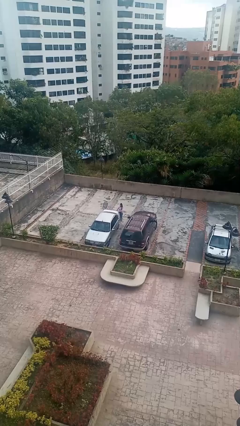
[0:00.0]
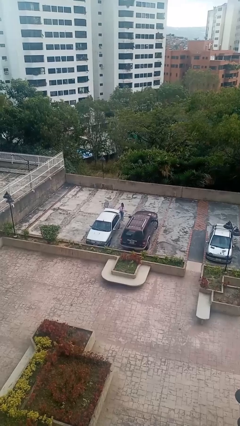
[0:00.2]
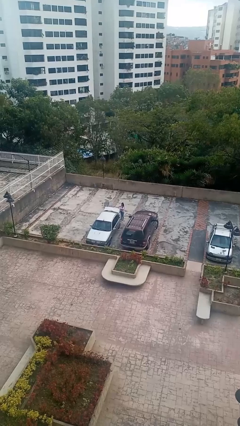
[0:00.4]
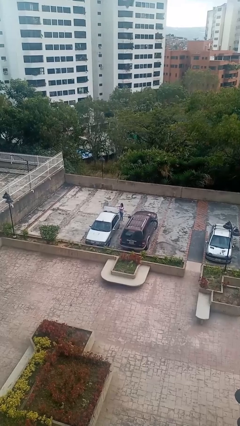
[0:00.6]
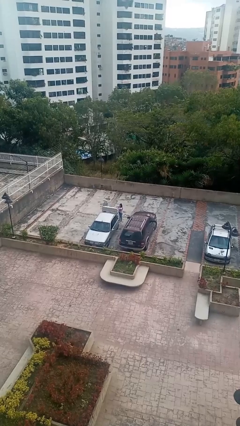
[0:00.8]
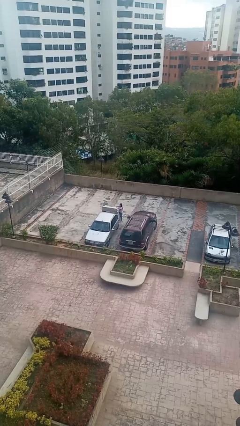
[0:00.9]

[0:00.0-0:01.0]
person opens car trunk

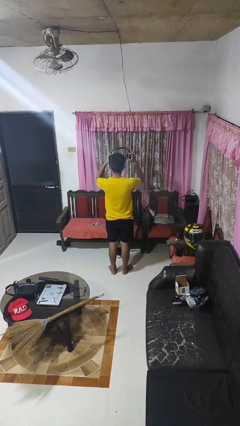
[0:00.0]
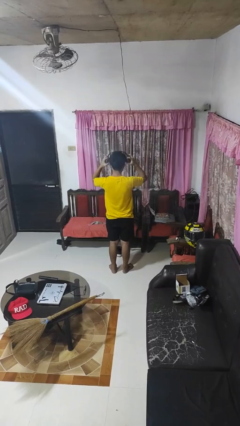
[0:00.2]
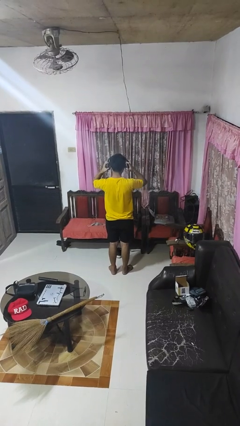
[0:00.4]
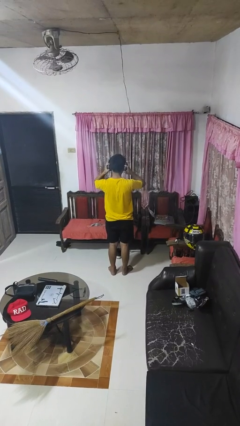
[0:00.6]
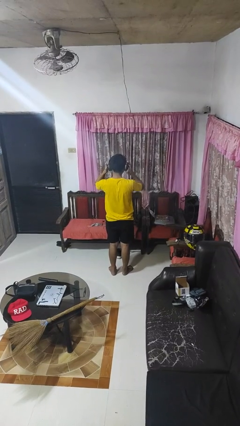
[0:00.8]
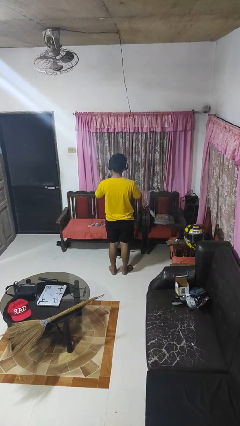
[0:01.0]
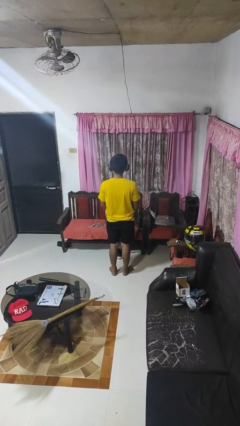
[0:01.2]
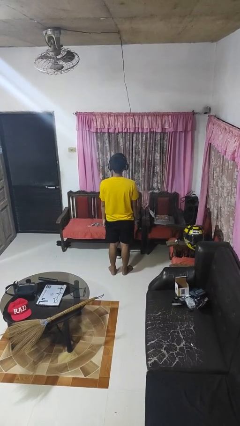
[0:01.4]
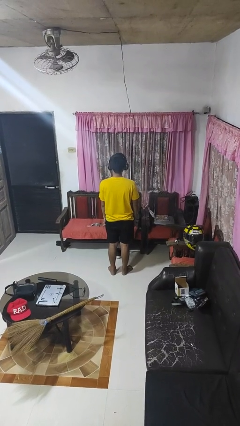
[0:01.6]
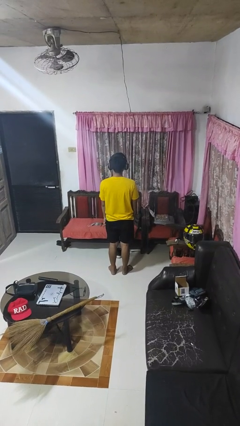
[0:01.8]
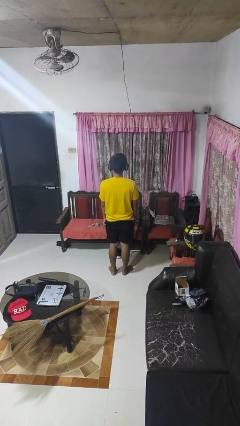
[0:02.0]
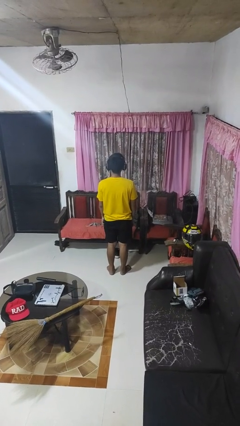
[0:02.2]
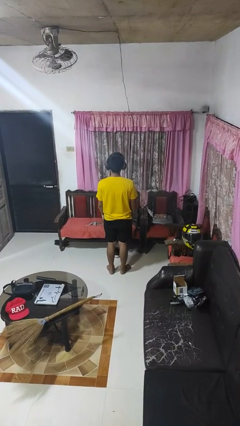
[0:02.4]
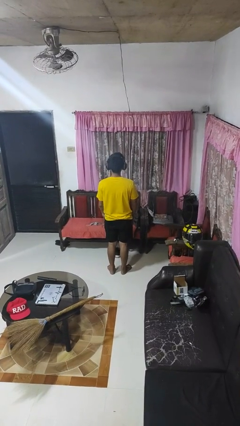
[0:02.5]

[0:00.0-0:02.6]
person puts on headphones

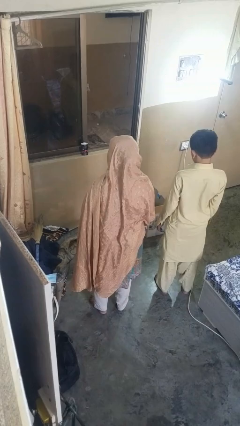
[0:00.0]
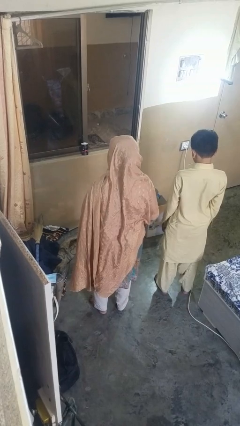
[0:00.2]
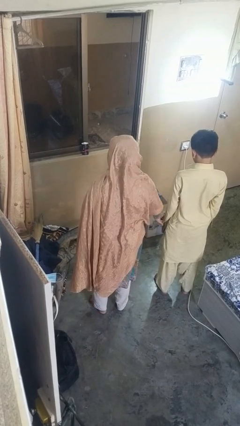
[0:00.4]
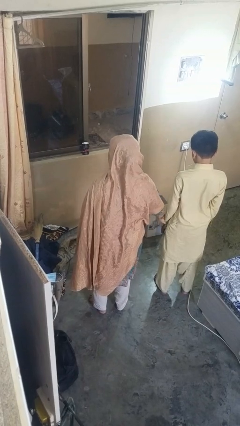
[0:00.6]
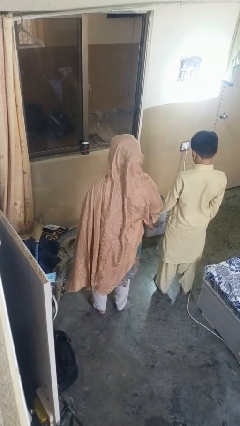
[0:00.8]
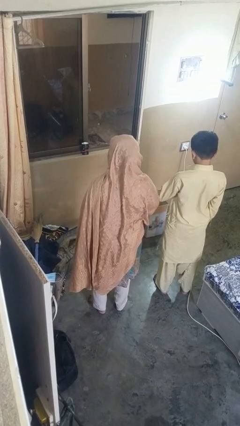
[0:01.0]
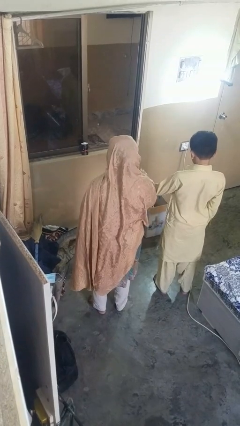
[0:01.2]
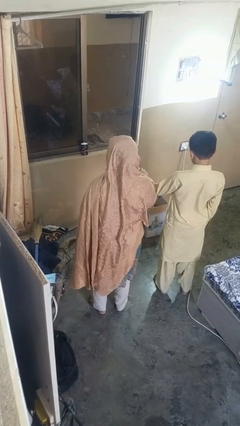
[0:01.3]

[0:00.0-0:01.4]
person grabs person by forearm

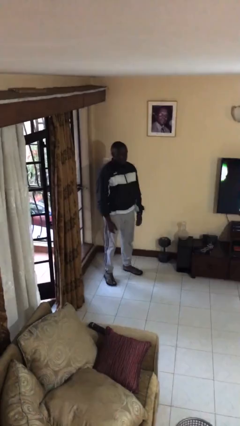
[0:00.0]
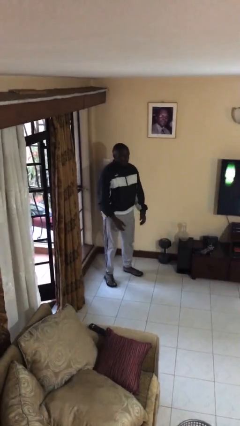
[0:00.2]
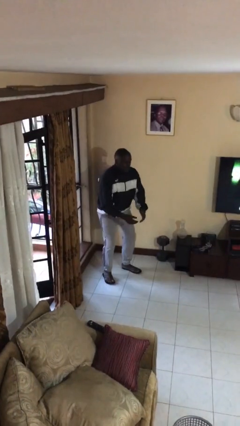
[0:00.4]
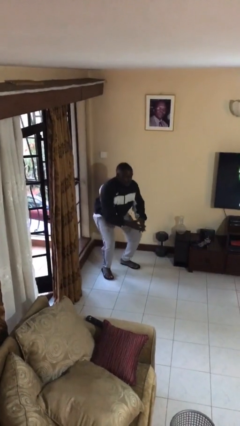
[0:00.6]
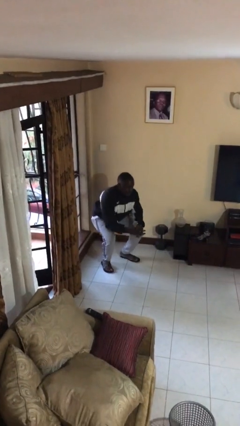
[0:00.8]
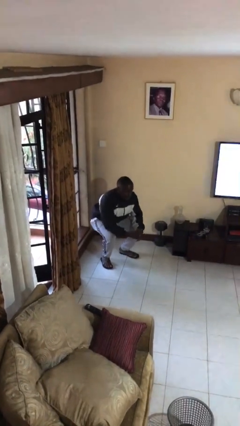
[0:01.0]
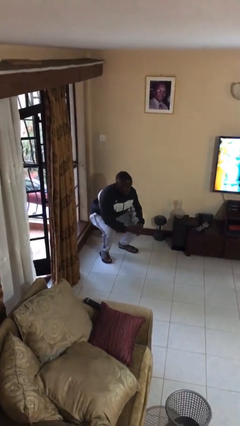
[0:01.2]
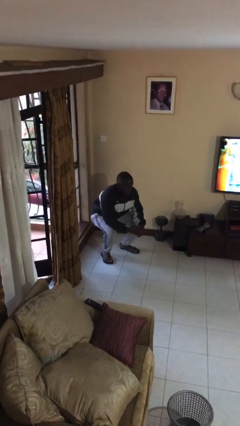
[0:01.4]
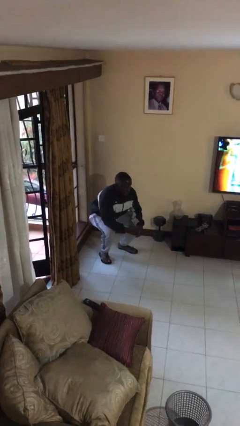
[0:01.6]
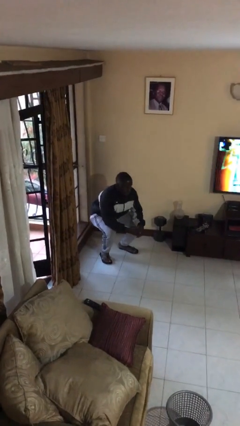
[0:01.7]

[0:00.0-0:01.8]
person squats

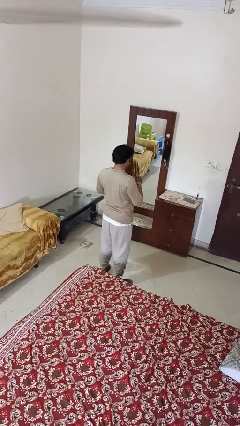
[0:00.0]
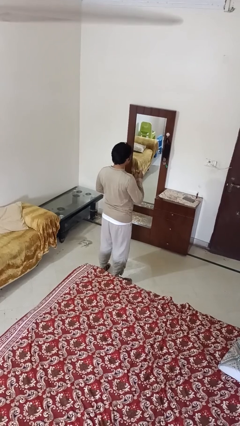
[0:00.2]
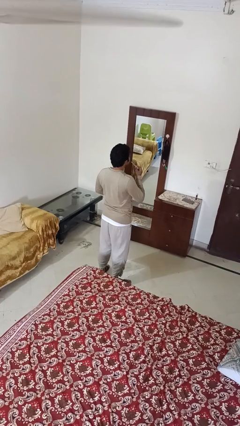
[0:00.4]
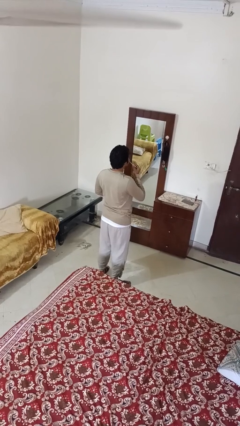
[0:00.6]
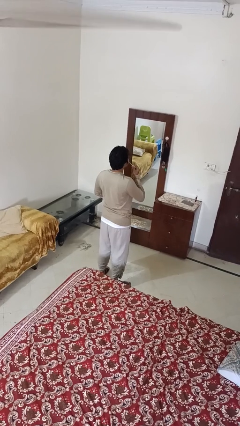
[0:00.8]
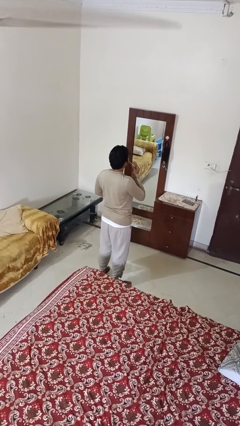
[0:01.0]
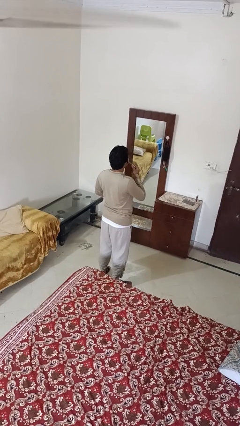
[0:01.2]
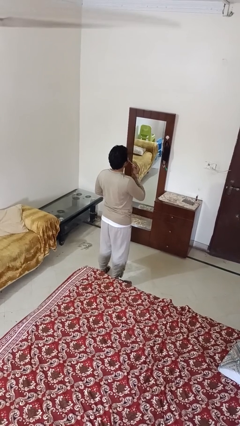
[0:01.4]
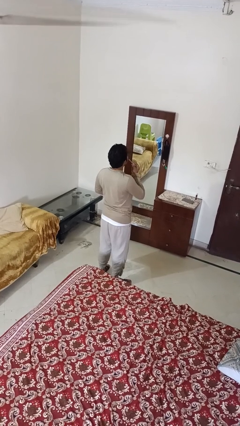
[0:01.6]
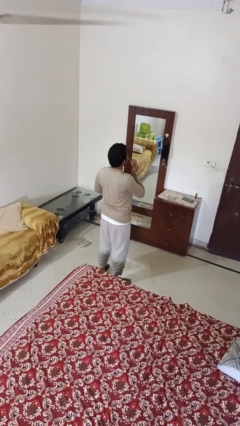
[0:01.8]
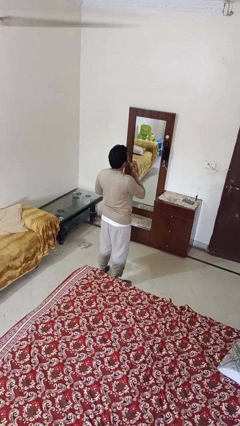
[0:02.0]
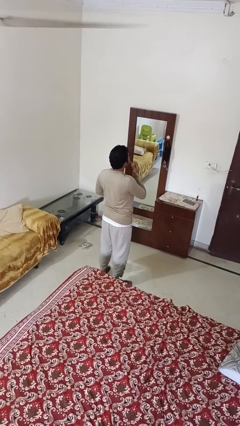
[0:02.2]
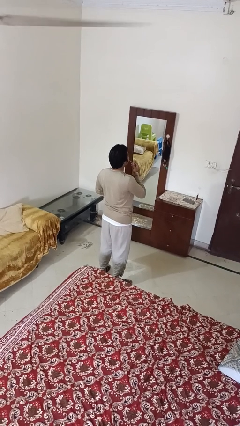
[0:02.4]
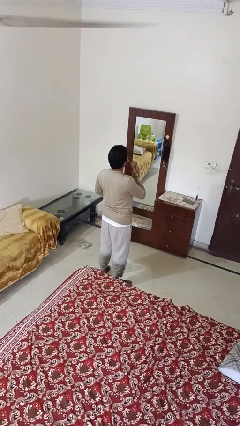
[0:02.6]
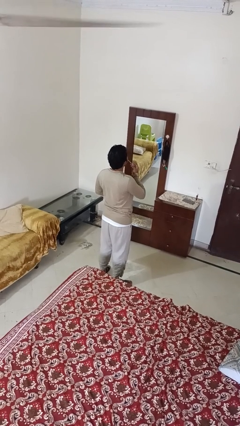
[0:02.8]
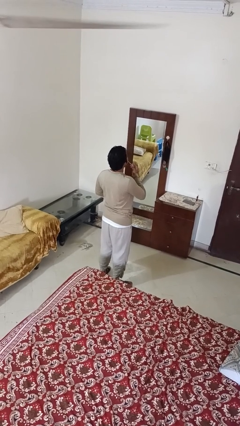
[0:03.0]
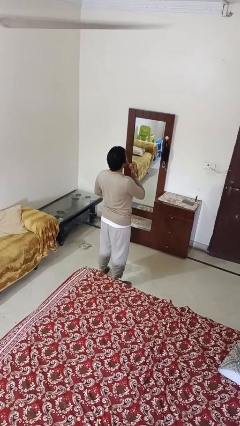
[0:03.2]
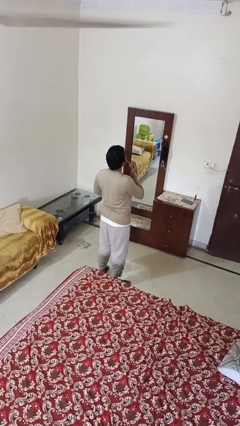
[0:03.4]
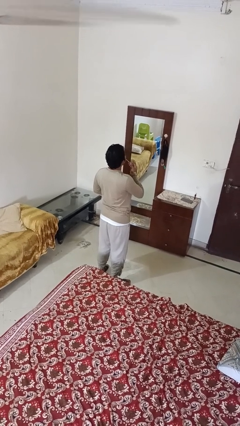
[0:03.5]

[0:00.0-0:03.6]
person applies lip makeup

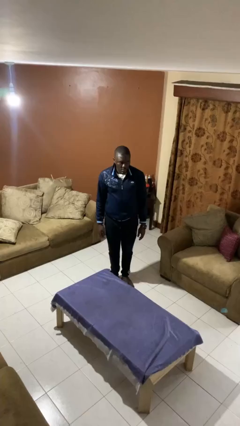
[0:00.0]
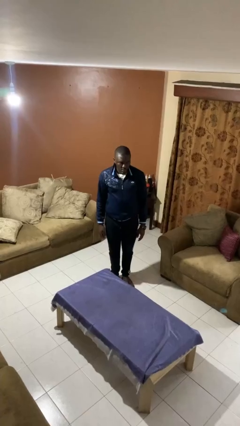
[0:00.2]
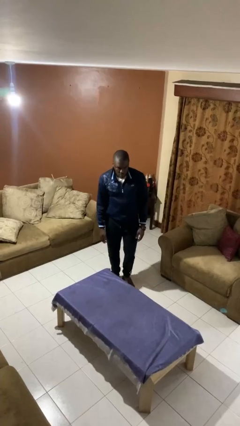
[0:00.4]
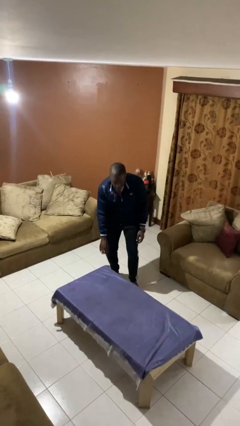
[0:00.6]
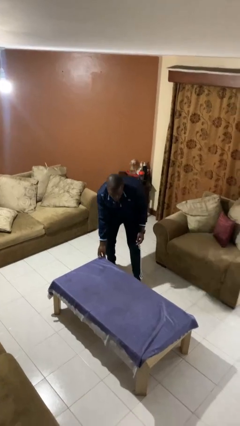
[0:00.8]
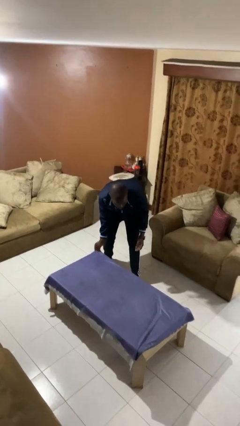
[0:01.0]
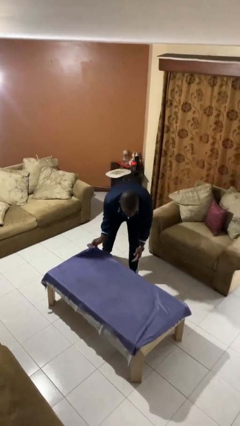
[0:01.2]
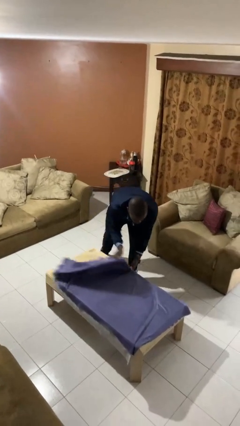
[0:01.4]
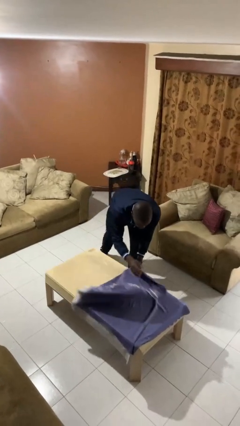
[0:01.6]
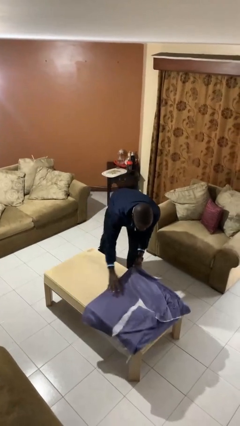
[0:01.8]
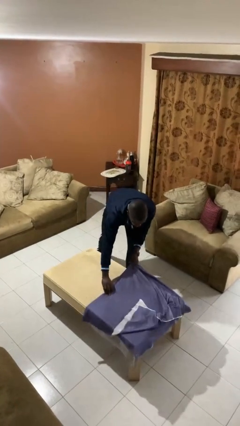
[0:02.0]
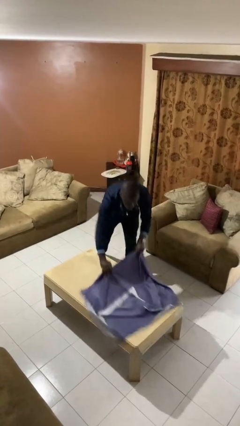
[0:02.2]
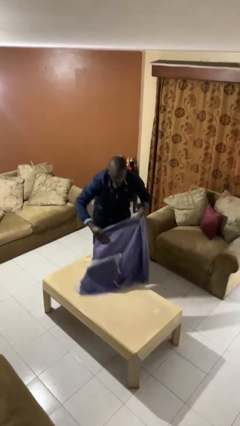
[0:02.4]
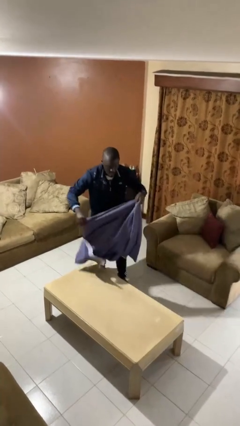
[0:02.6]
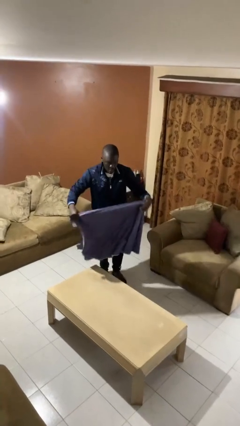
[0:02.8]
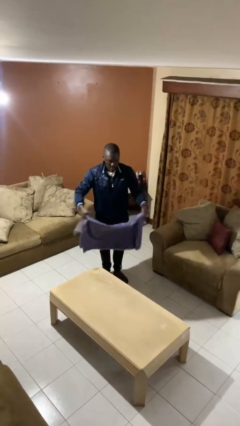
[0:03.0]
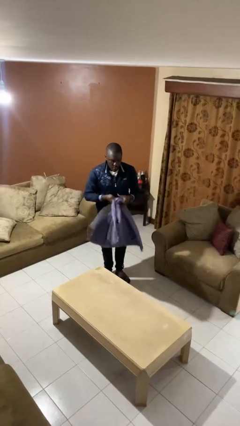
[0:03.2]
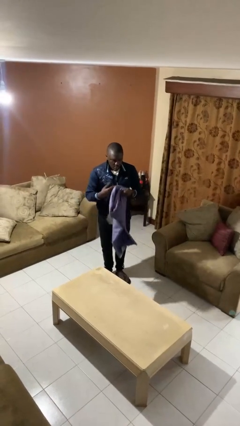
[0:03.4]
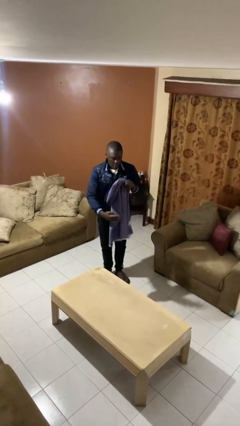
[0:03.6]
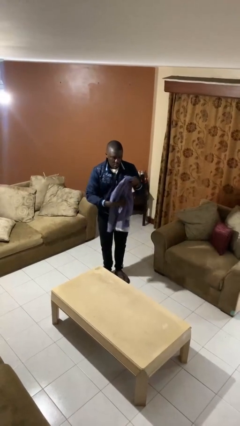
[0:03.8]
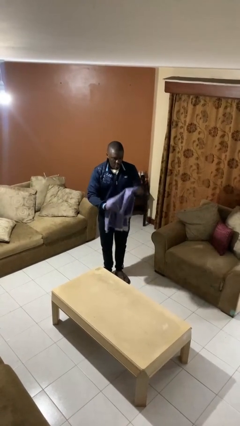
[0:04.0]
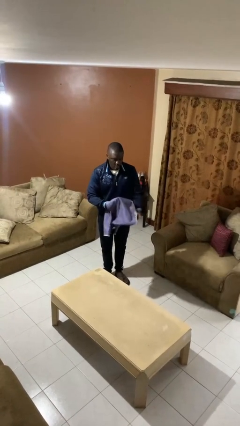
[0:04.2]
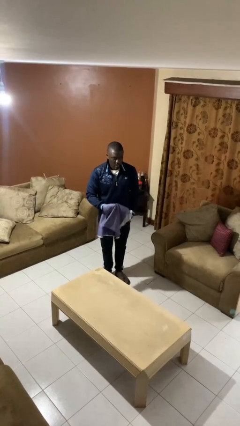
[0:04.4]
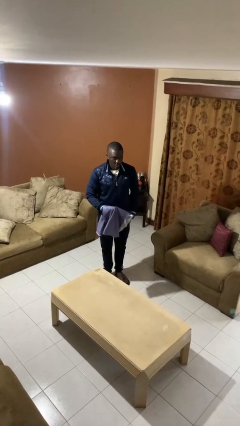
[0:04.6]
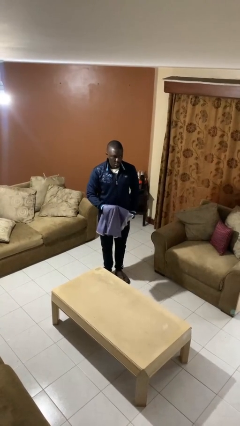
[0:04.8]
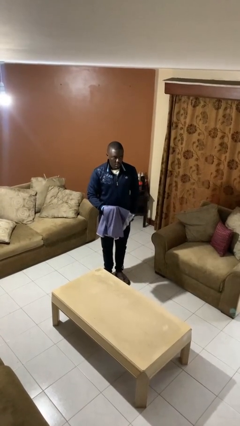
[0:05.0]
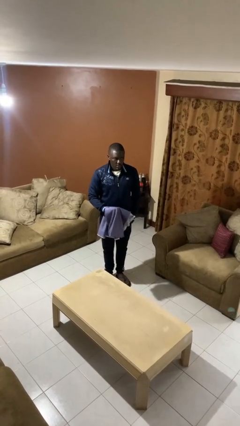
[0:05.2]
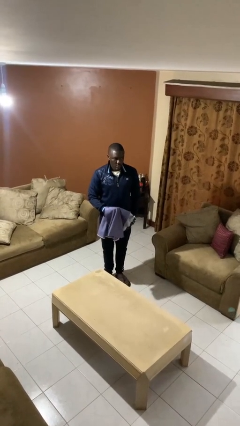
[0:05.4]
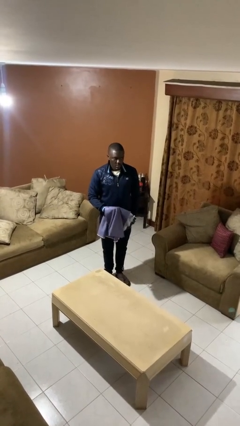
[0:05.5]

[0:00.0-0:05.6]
person folds tablecloth

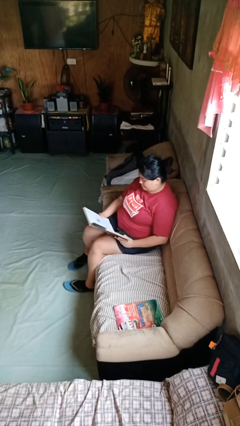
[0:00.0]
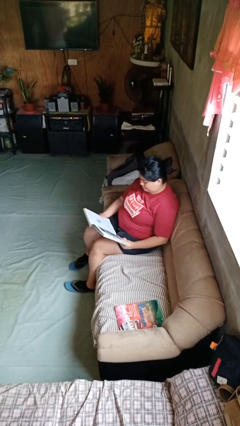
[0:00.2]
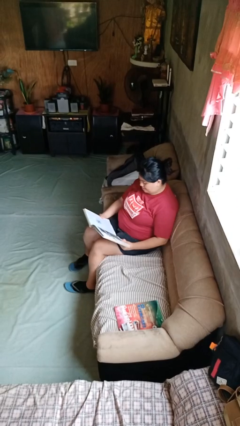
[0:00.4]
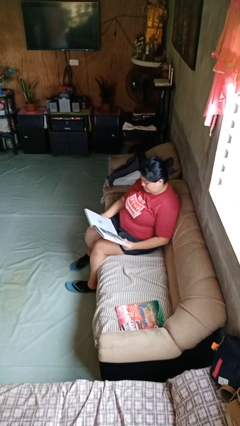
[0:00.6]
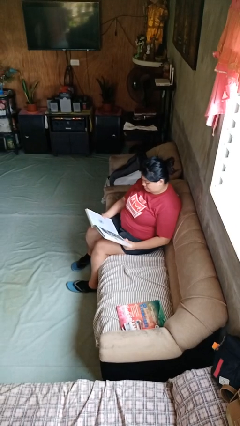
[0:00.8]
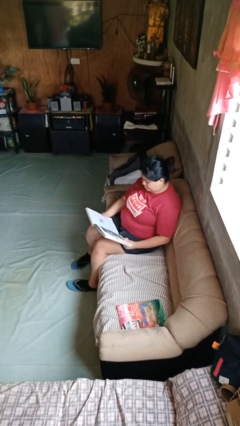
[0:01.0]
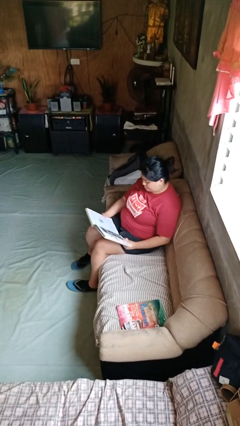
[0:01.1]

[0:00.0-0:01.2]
person reads book

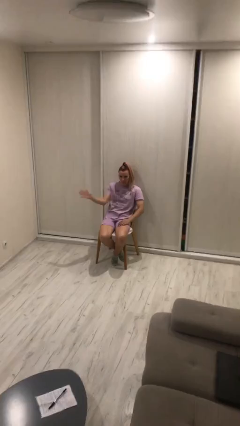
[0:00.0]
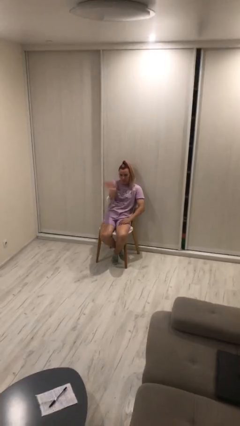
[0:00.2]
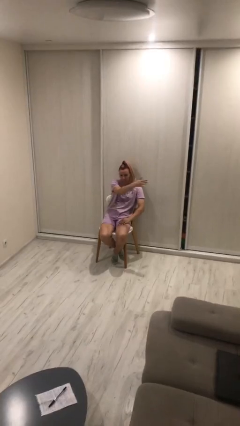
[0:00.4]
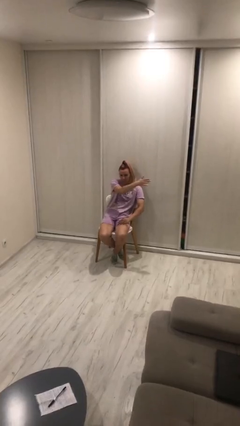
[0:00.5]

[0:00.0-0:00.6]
person gestures swipe left
